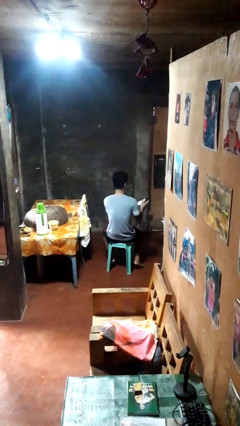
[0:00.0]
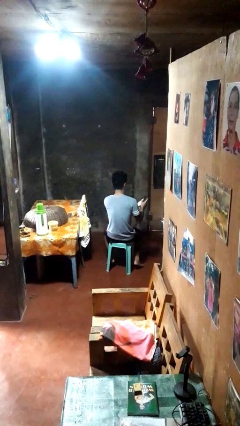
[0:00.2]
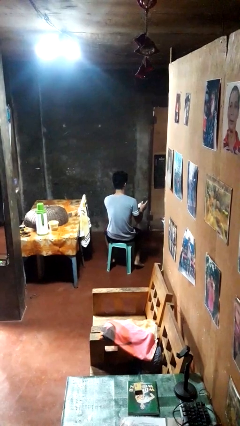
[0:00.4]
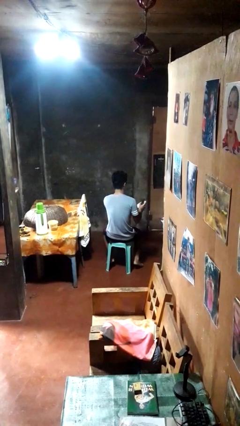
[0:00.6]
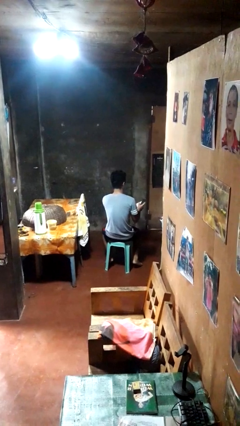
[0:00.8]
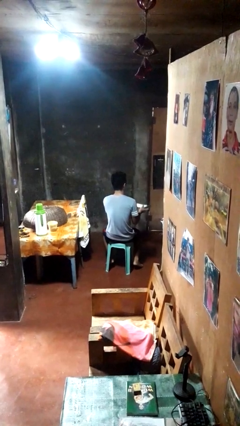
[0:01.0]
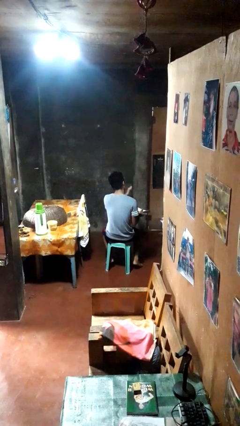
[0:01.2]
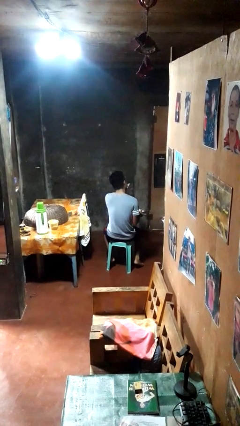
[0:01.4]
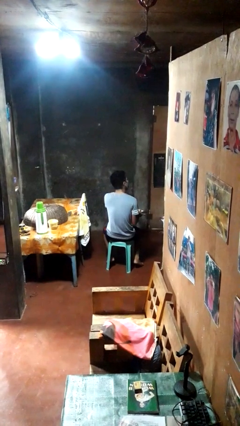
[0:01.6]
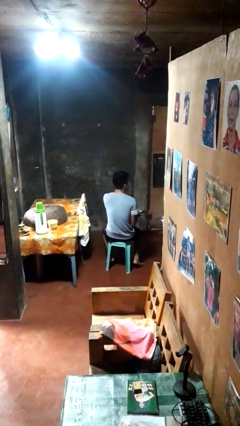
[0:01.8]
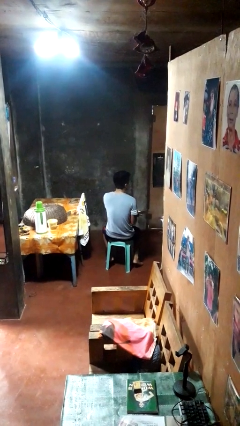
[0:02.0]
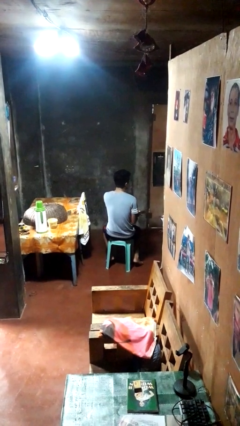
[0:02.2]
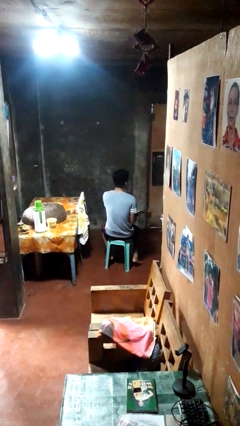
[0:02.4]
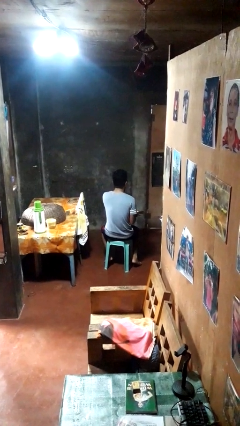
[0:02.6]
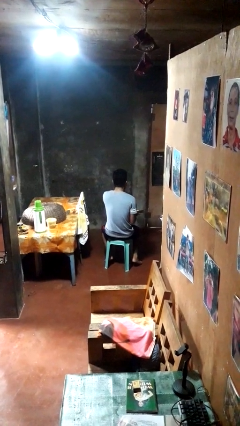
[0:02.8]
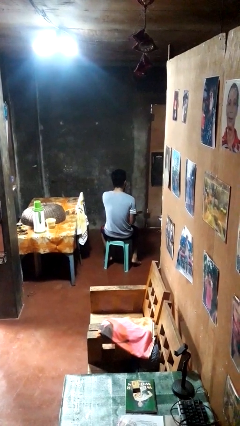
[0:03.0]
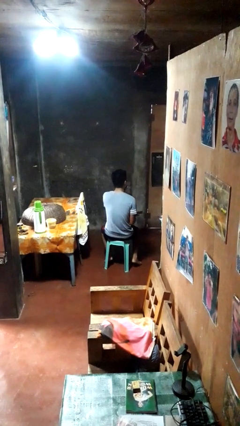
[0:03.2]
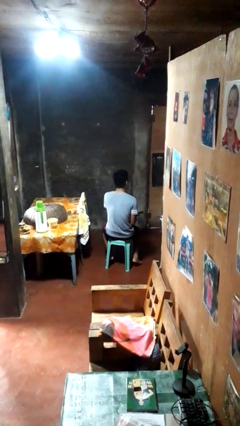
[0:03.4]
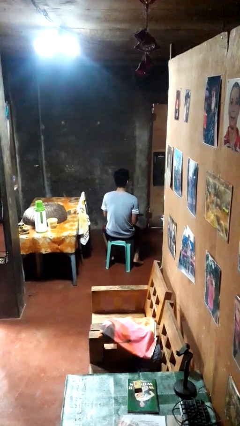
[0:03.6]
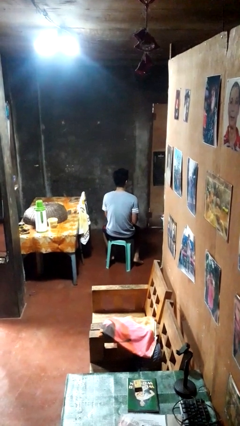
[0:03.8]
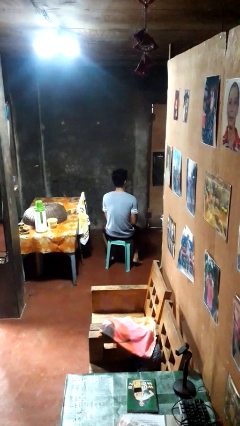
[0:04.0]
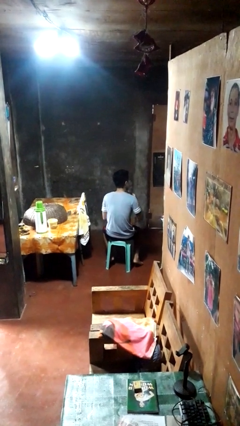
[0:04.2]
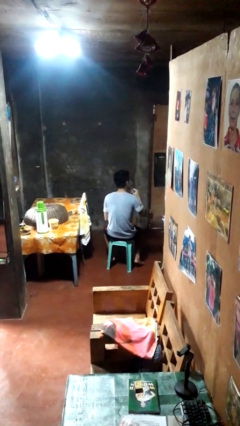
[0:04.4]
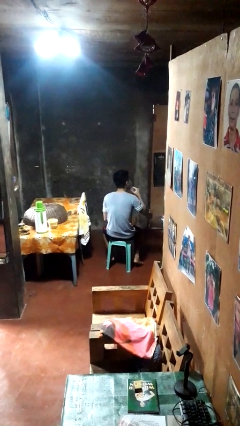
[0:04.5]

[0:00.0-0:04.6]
person applies shaving cream

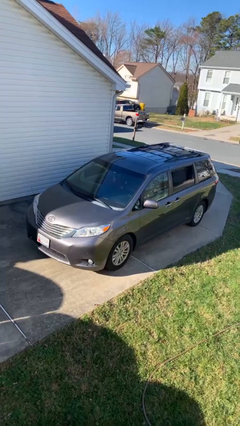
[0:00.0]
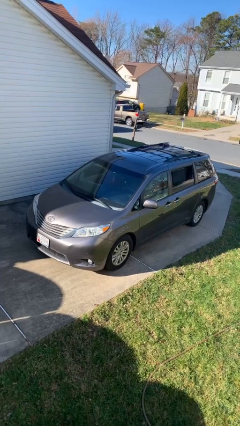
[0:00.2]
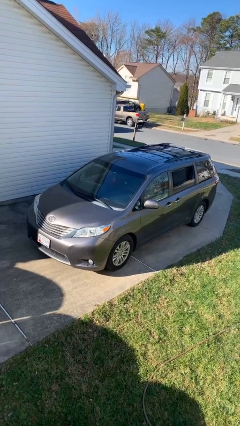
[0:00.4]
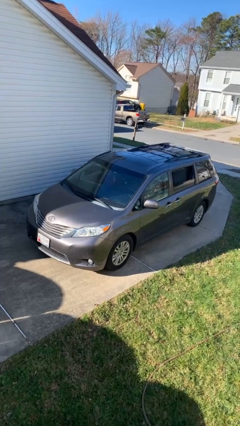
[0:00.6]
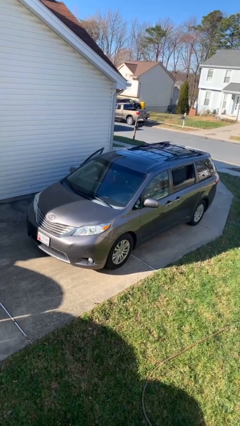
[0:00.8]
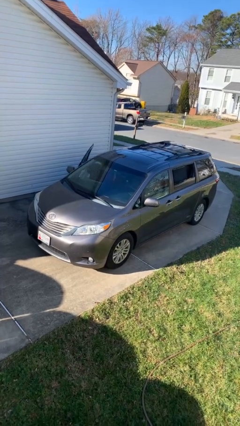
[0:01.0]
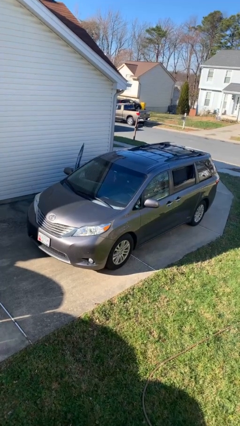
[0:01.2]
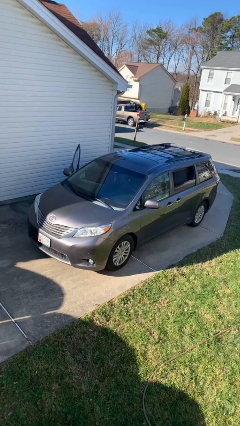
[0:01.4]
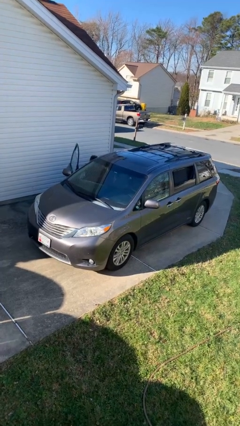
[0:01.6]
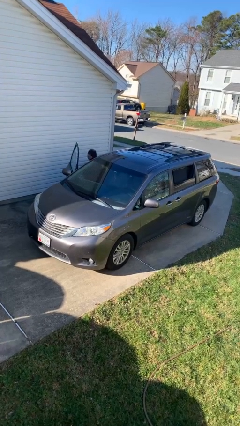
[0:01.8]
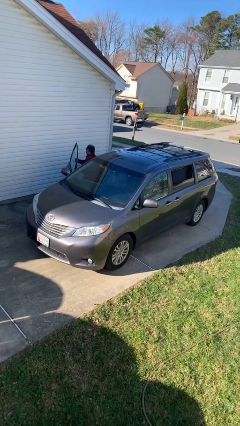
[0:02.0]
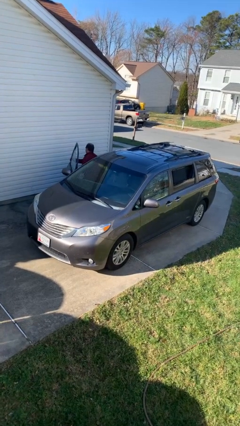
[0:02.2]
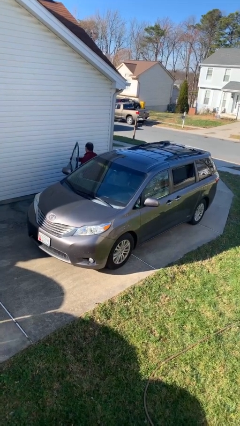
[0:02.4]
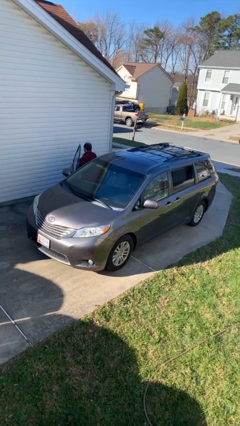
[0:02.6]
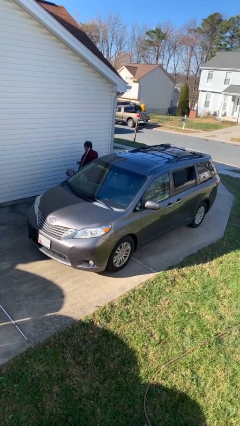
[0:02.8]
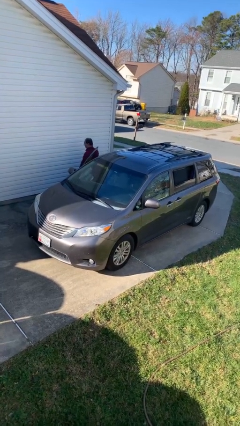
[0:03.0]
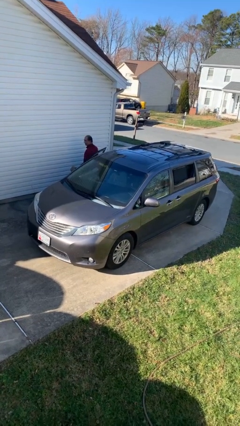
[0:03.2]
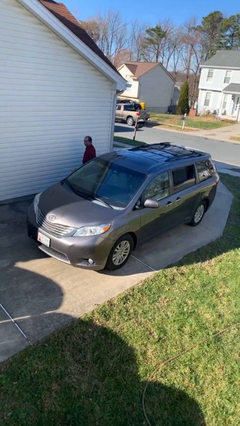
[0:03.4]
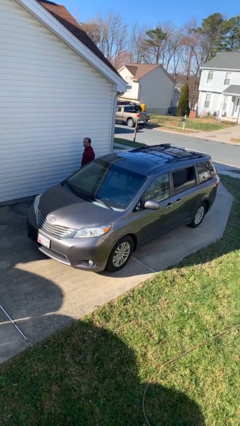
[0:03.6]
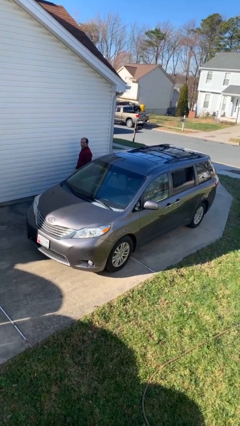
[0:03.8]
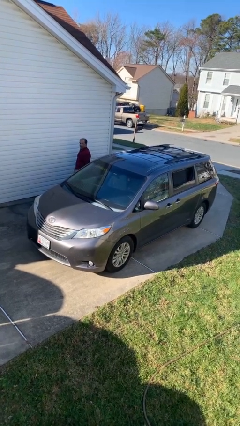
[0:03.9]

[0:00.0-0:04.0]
car drops off person

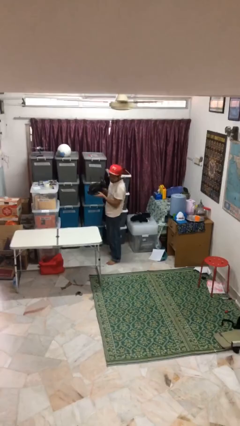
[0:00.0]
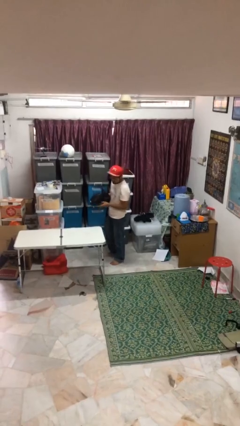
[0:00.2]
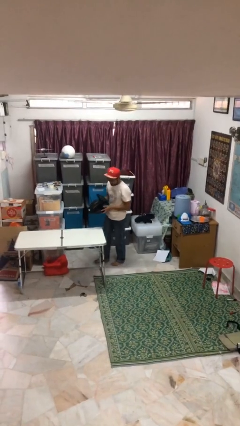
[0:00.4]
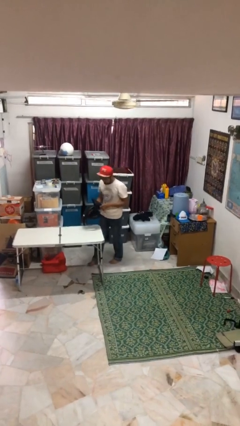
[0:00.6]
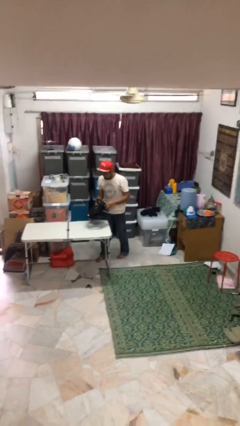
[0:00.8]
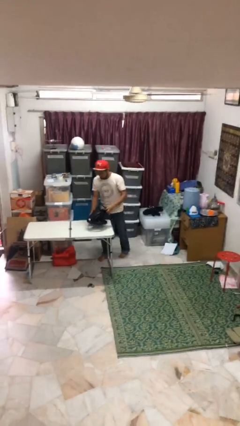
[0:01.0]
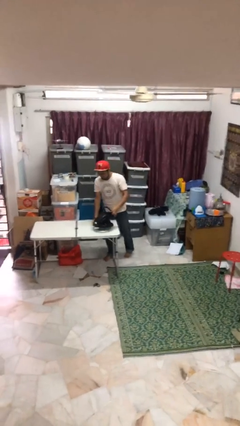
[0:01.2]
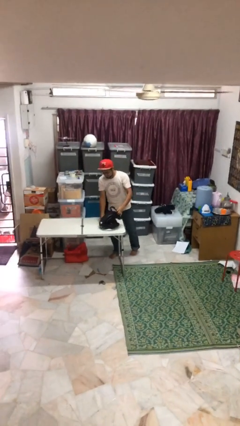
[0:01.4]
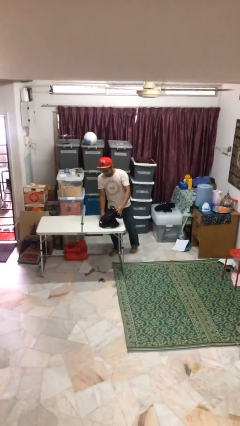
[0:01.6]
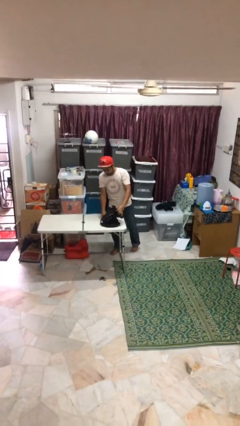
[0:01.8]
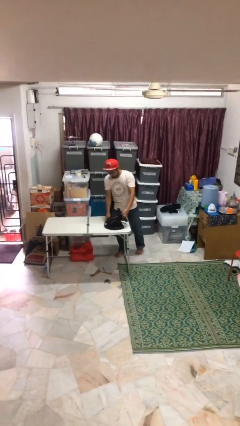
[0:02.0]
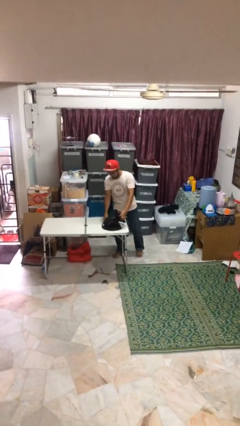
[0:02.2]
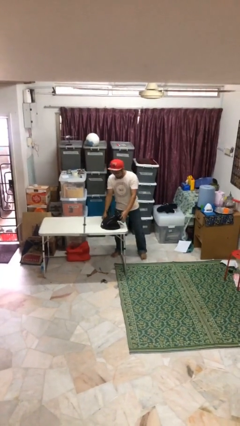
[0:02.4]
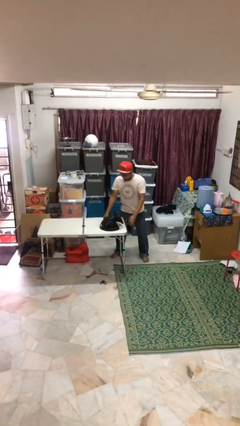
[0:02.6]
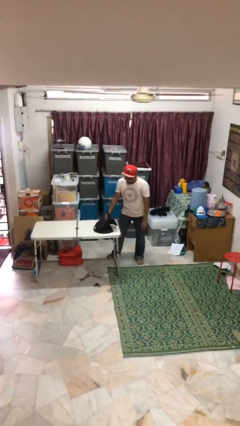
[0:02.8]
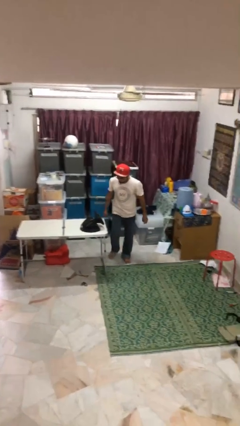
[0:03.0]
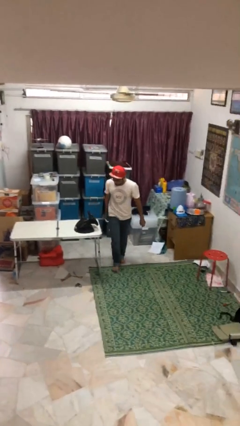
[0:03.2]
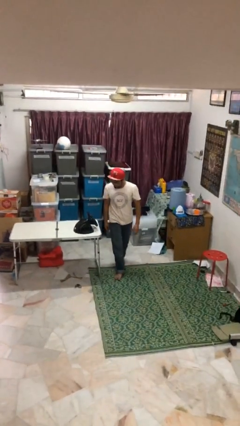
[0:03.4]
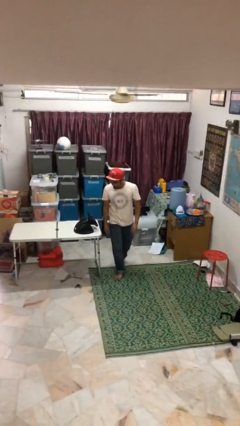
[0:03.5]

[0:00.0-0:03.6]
person puts down object on table

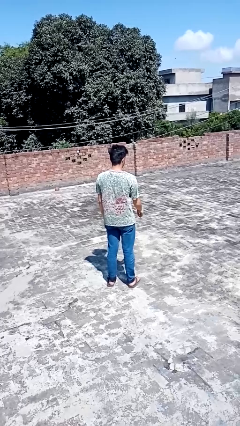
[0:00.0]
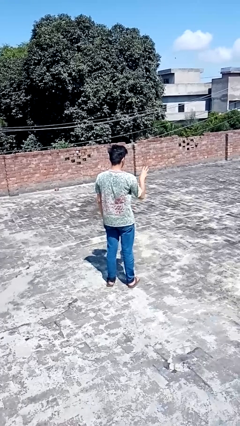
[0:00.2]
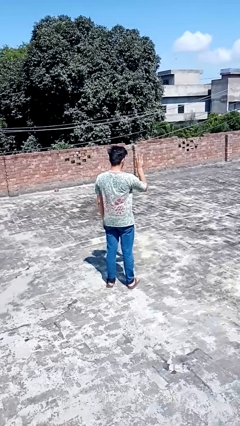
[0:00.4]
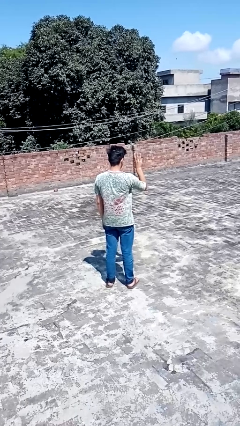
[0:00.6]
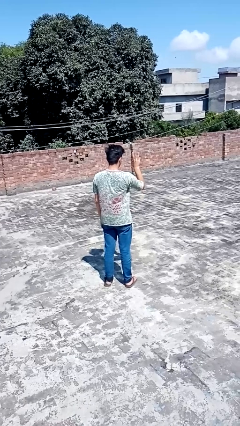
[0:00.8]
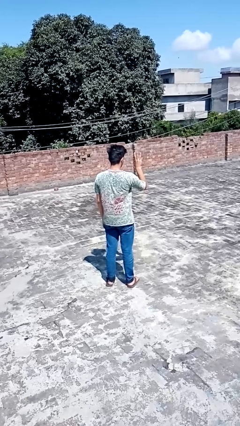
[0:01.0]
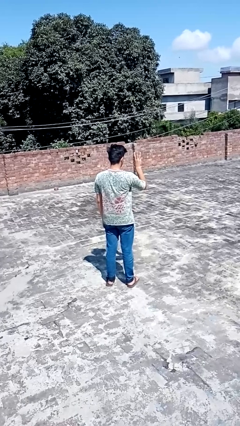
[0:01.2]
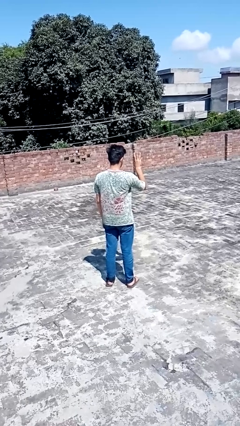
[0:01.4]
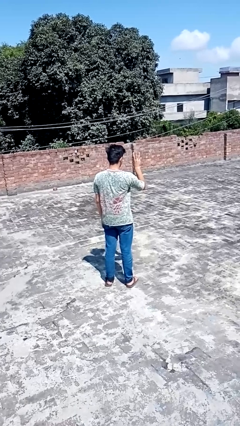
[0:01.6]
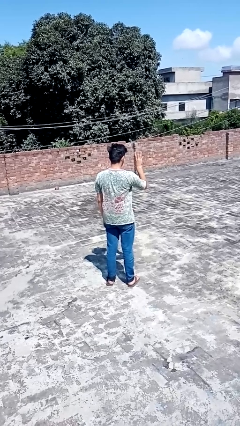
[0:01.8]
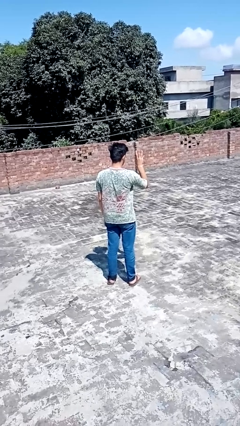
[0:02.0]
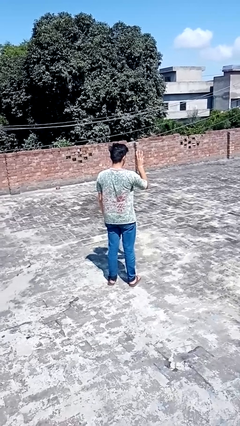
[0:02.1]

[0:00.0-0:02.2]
person gestures number three

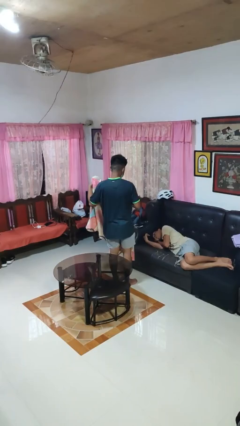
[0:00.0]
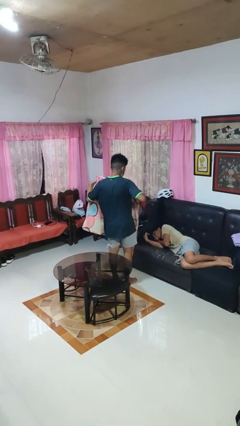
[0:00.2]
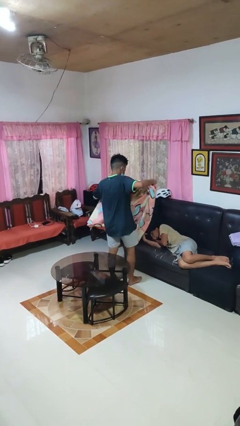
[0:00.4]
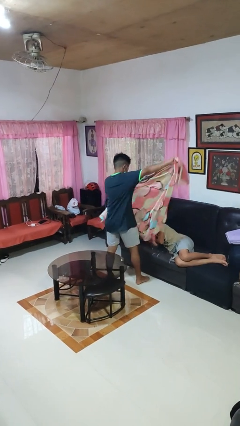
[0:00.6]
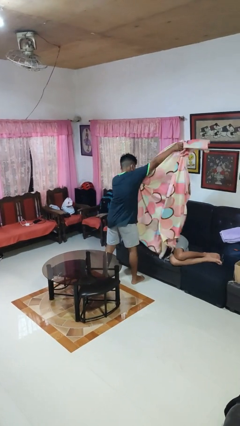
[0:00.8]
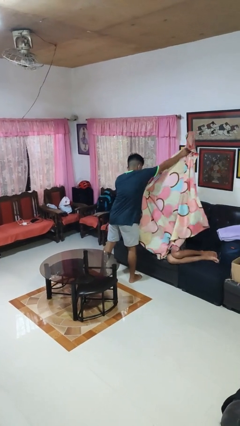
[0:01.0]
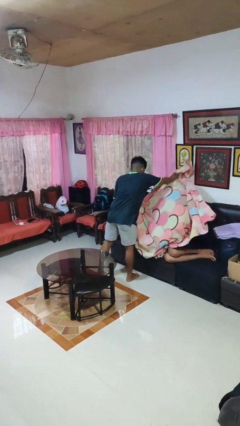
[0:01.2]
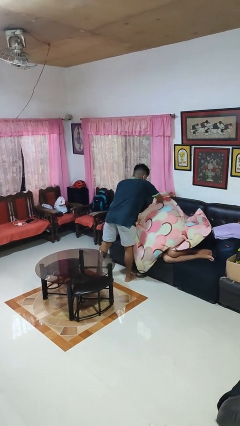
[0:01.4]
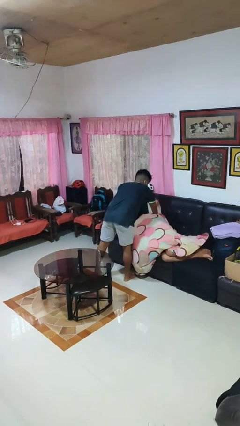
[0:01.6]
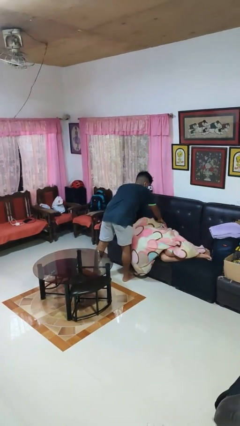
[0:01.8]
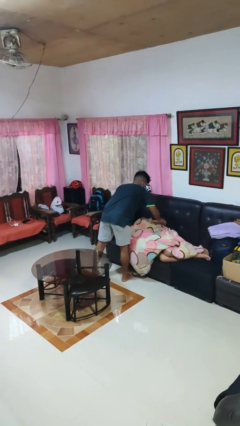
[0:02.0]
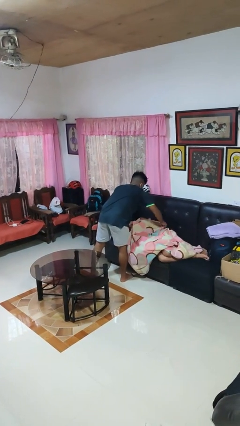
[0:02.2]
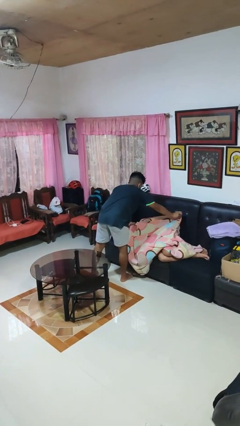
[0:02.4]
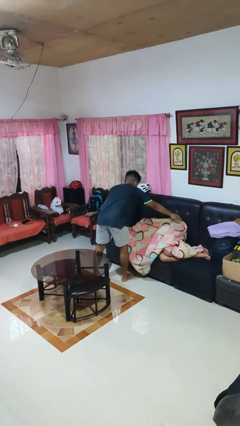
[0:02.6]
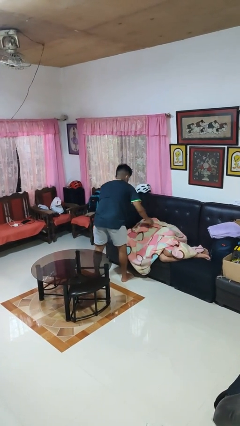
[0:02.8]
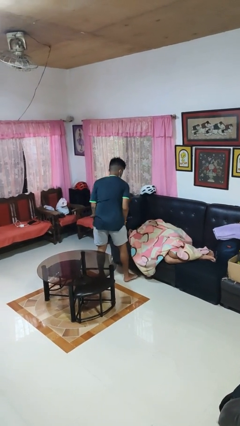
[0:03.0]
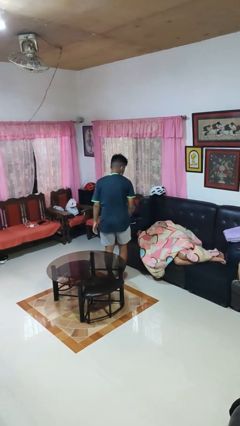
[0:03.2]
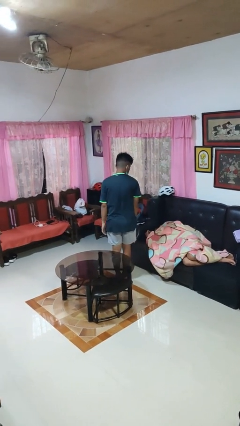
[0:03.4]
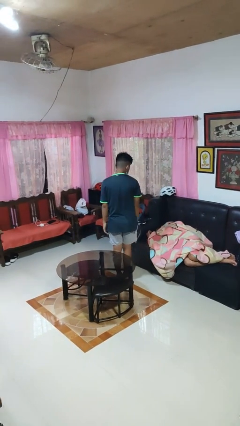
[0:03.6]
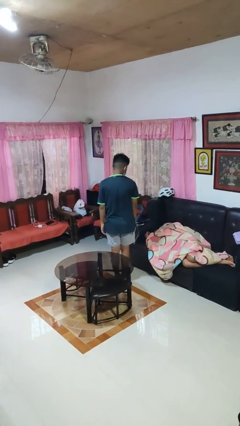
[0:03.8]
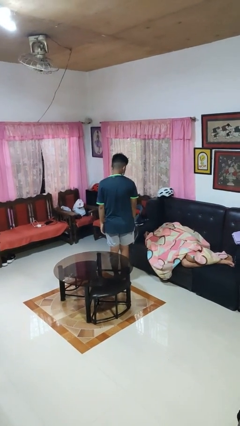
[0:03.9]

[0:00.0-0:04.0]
person covers friend with blanket
